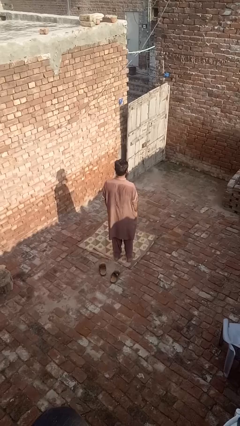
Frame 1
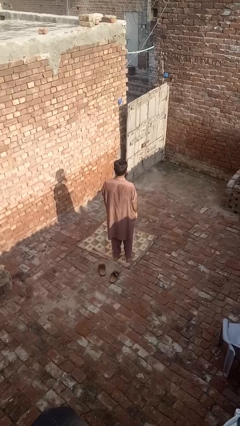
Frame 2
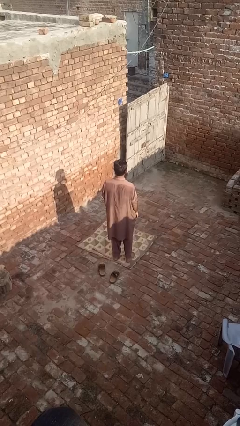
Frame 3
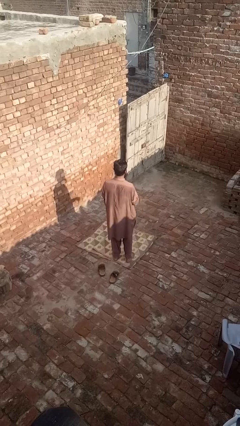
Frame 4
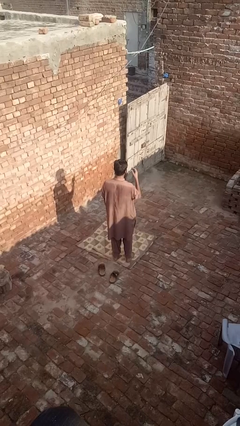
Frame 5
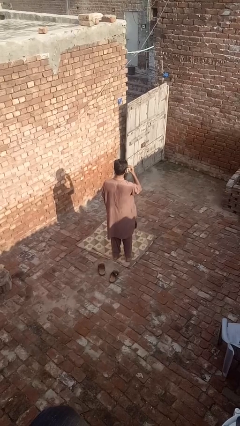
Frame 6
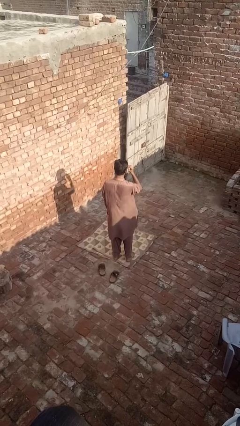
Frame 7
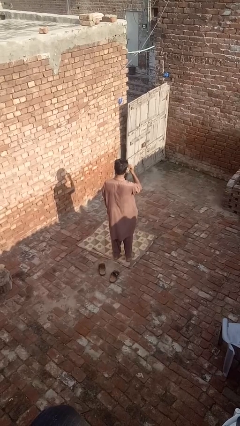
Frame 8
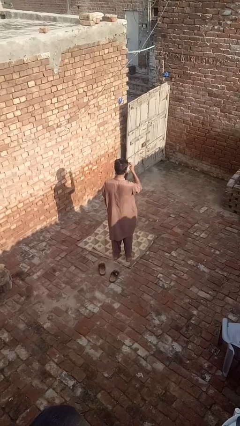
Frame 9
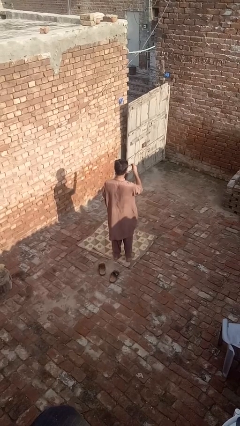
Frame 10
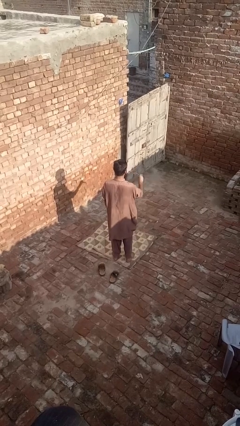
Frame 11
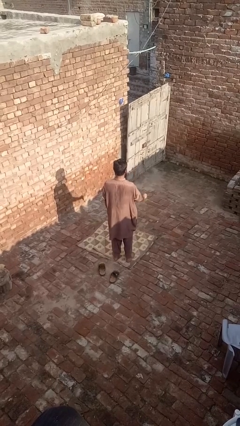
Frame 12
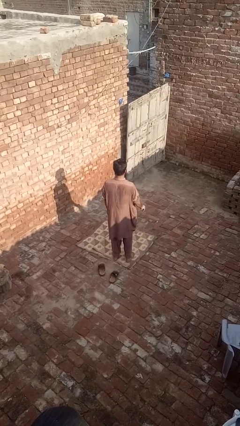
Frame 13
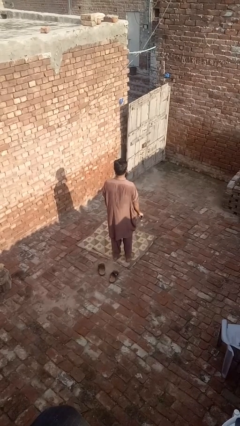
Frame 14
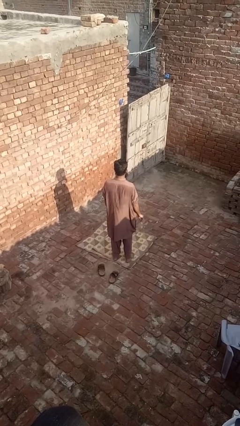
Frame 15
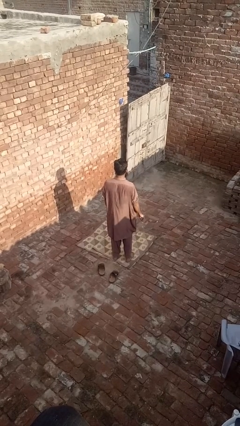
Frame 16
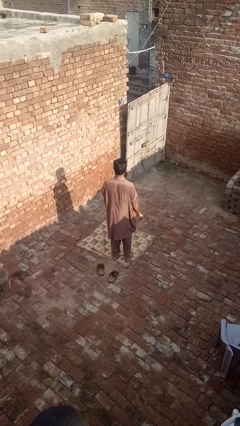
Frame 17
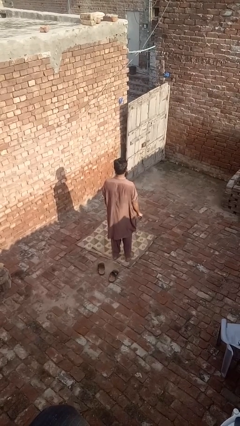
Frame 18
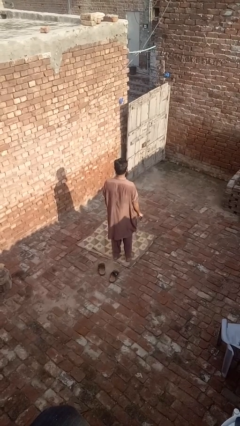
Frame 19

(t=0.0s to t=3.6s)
person takes off glasses

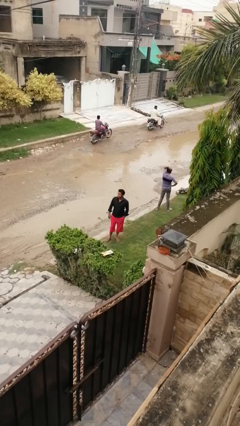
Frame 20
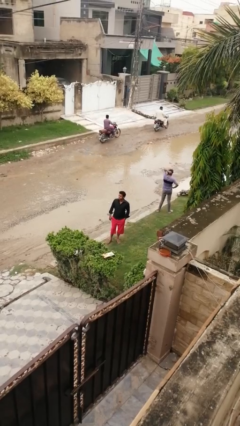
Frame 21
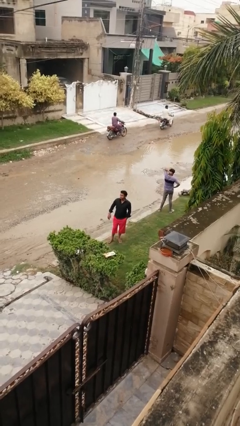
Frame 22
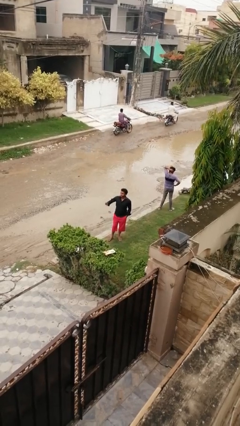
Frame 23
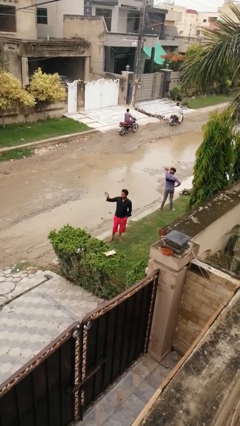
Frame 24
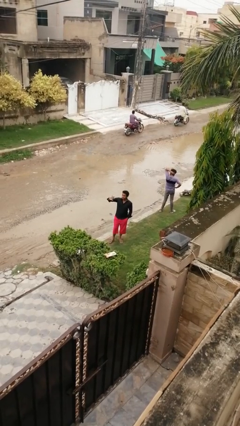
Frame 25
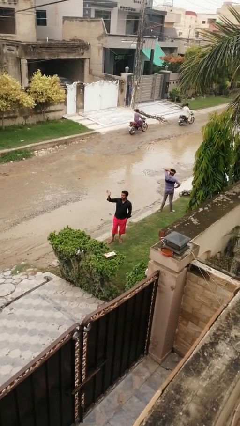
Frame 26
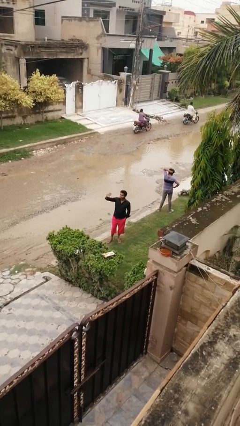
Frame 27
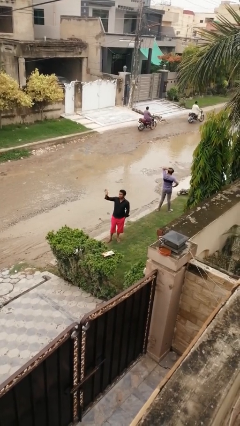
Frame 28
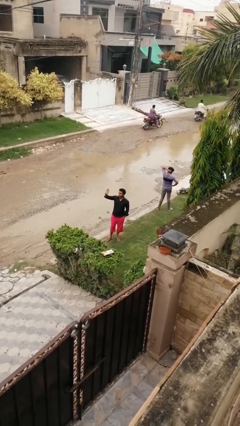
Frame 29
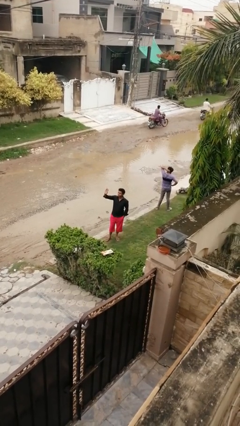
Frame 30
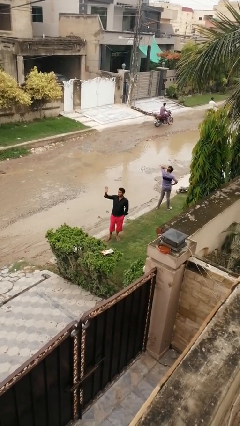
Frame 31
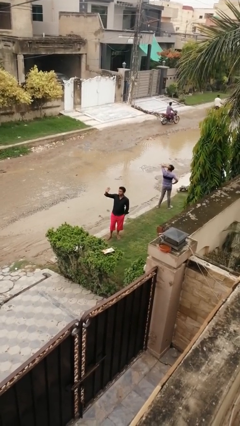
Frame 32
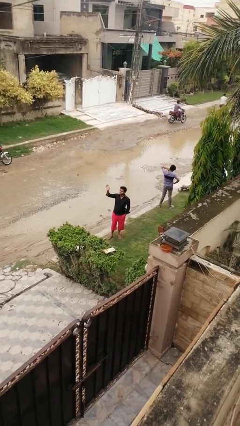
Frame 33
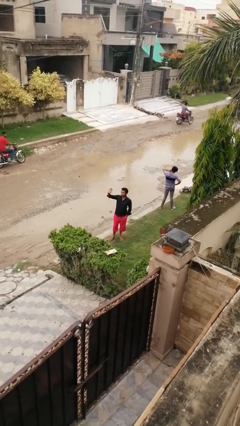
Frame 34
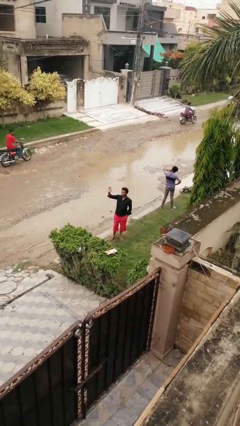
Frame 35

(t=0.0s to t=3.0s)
person waves at person

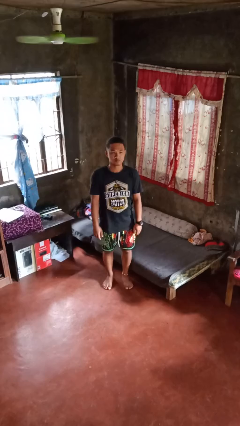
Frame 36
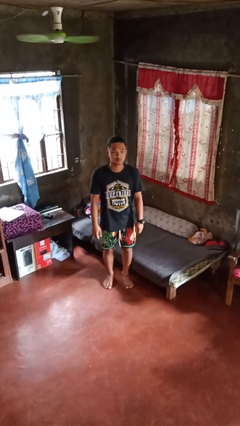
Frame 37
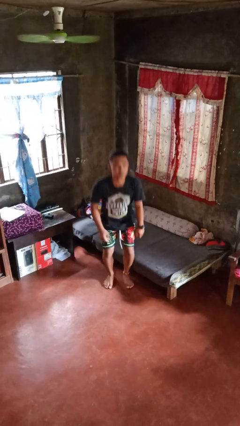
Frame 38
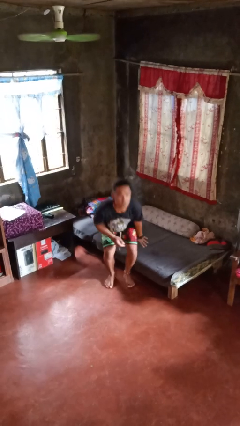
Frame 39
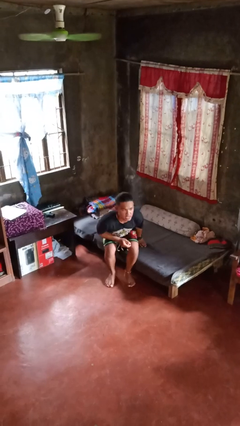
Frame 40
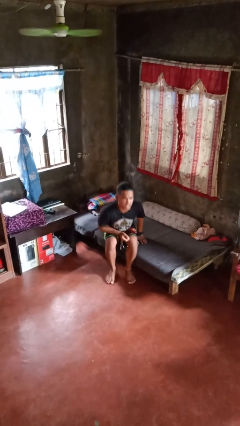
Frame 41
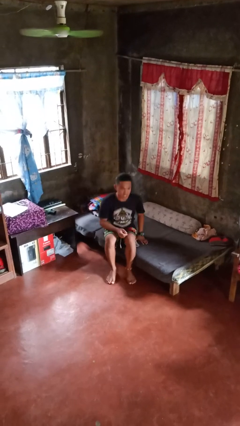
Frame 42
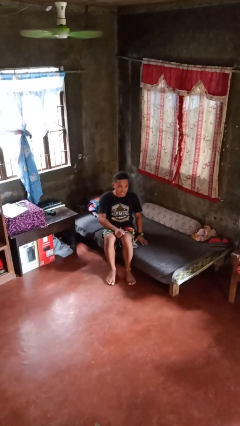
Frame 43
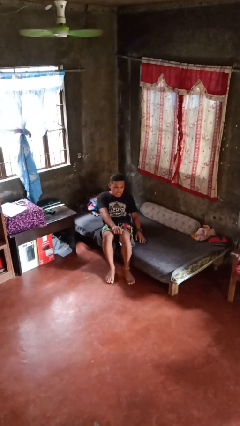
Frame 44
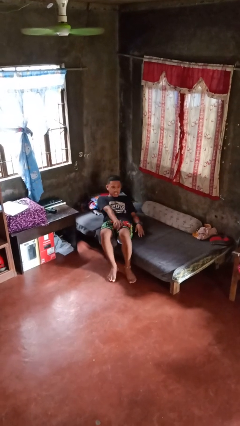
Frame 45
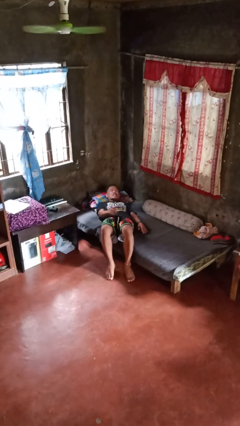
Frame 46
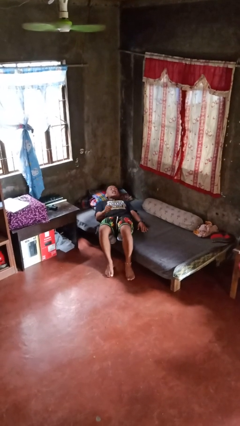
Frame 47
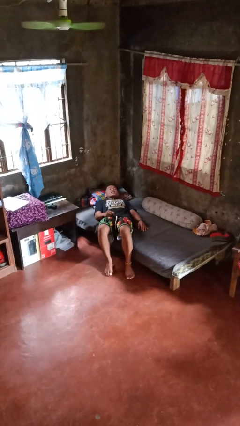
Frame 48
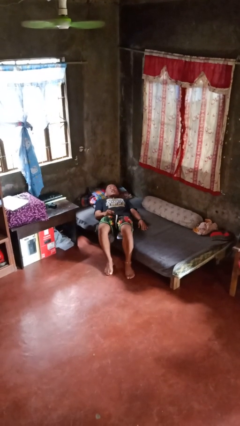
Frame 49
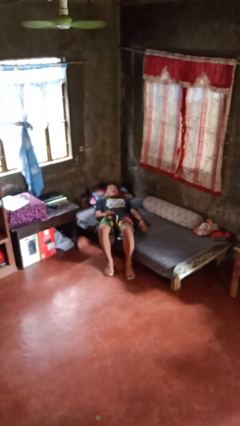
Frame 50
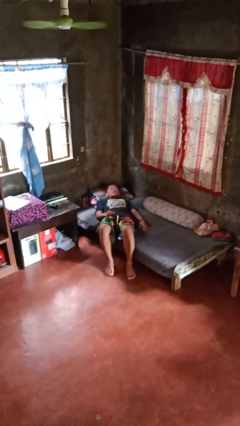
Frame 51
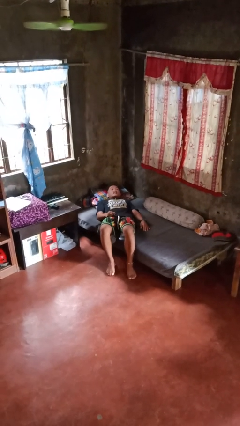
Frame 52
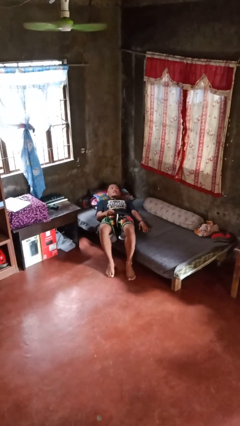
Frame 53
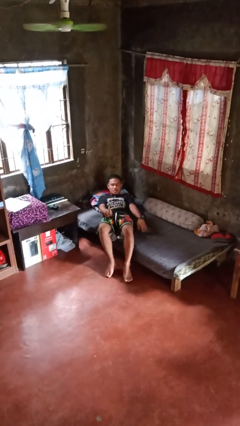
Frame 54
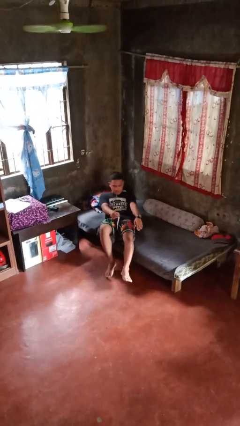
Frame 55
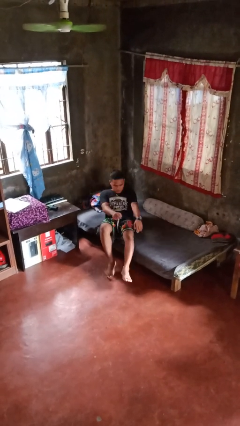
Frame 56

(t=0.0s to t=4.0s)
person lies down on bed

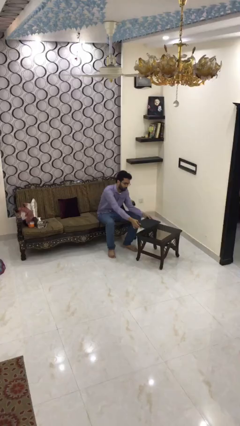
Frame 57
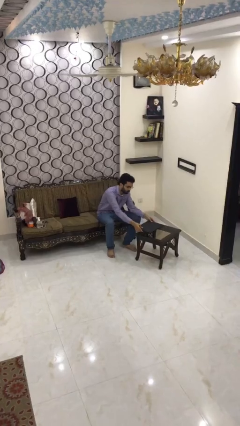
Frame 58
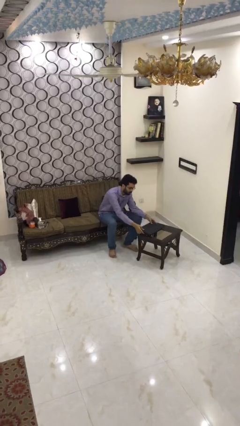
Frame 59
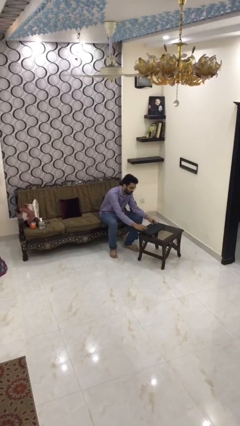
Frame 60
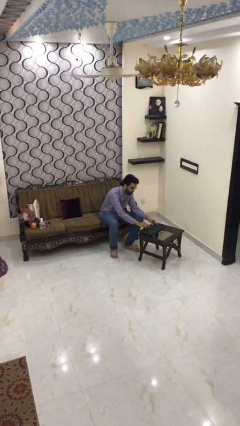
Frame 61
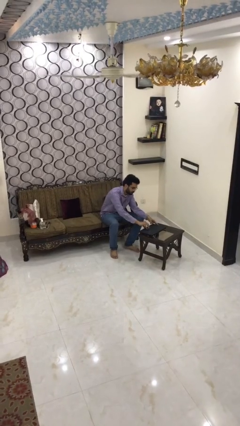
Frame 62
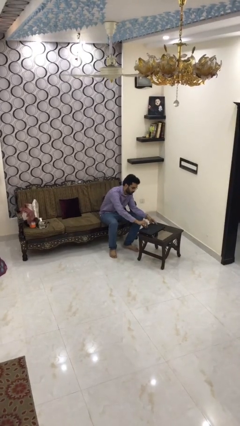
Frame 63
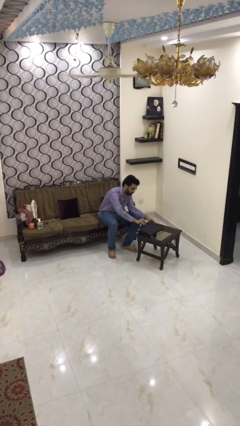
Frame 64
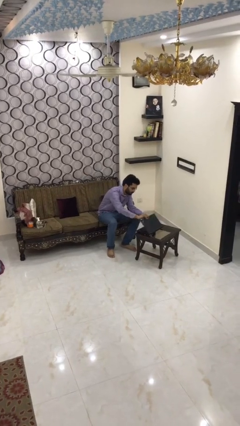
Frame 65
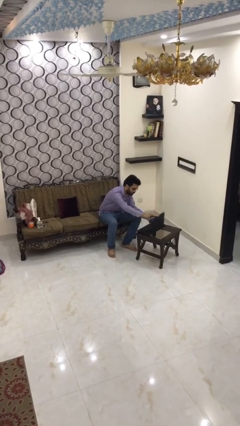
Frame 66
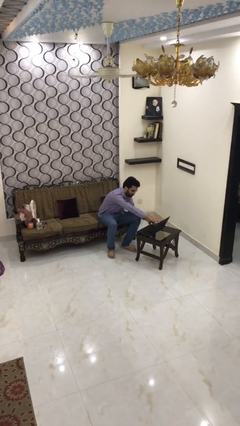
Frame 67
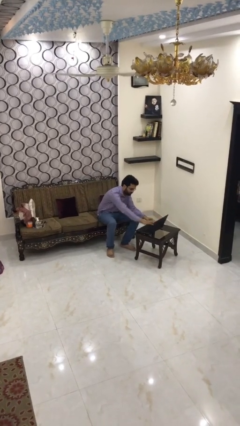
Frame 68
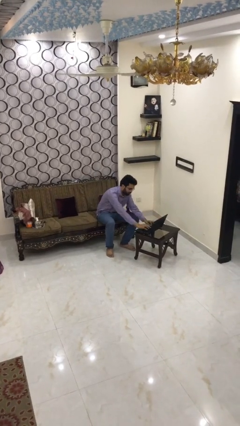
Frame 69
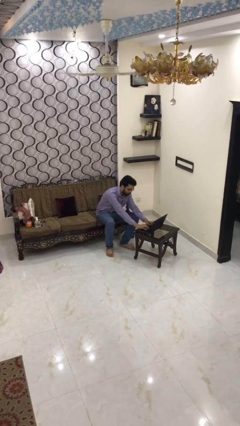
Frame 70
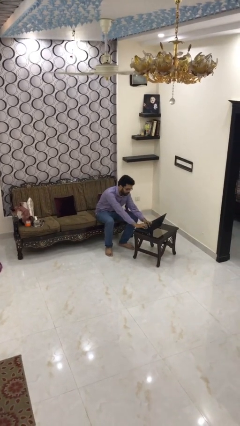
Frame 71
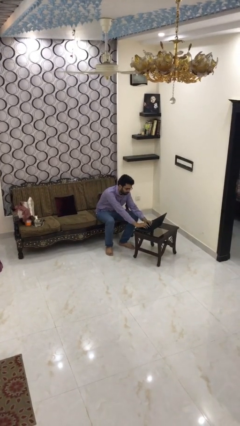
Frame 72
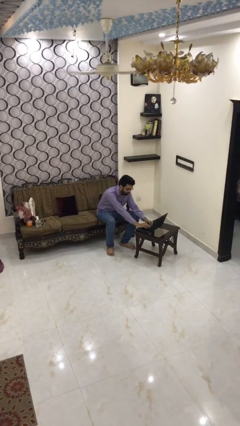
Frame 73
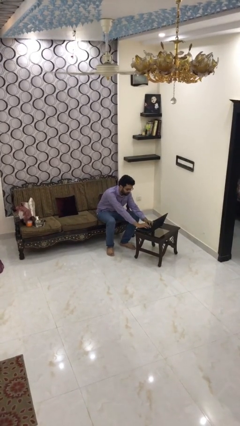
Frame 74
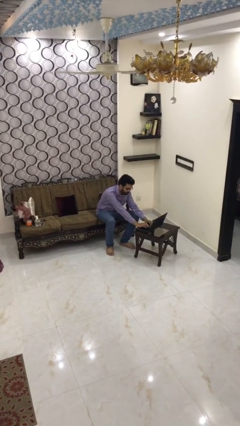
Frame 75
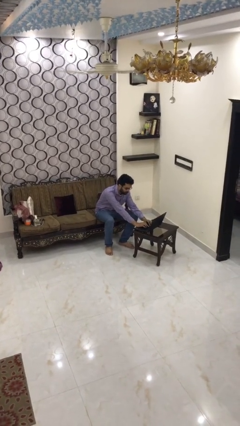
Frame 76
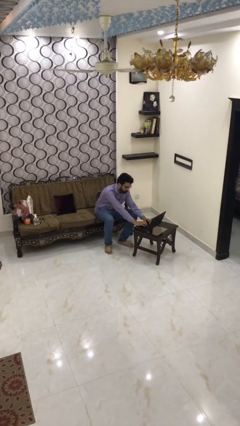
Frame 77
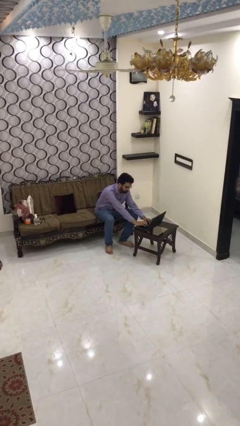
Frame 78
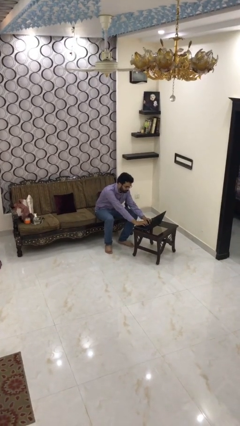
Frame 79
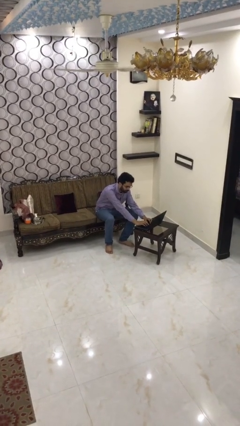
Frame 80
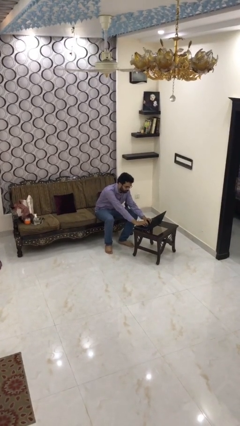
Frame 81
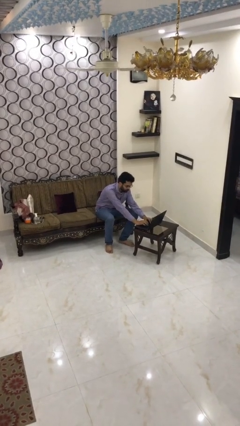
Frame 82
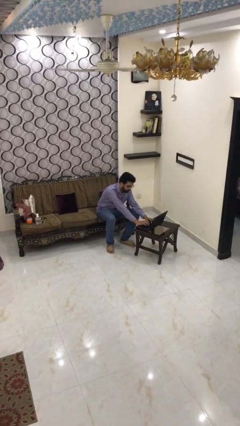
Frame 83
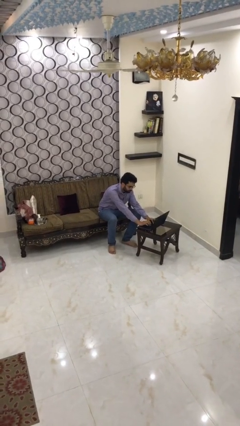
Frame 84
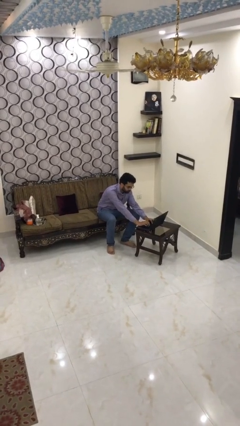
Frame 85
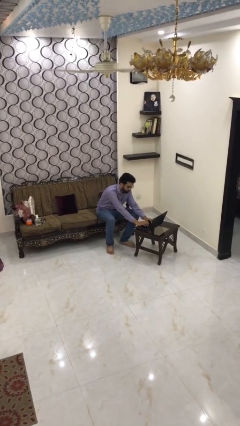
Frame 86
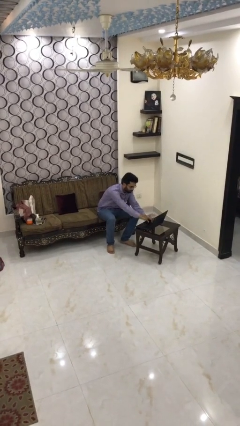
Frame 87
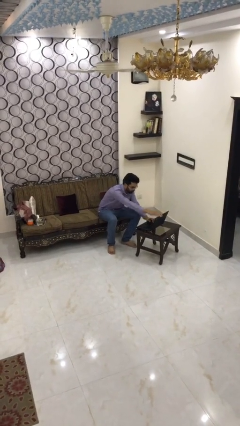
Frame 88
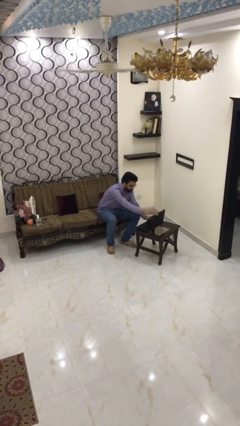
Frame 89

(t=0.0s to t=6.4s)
person interacts with laptop
